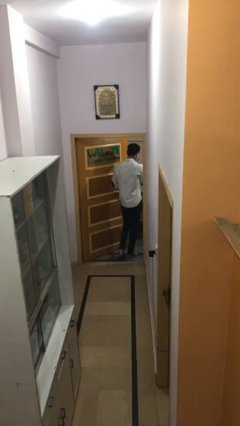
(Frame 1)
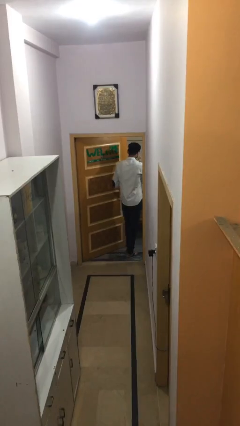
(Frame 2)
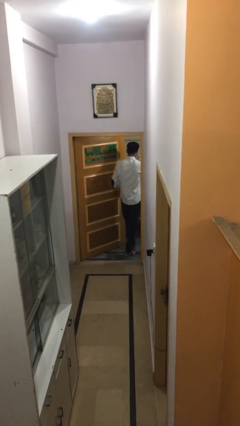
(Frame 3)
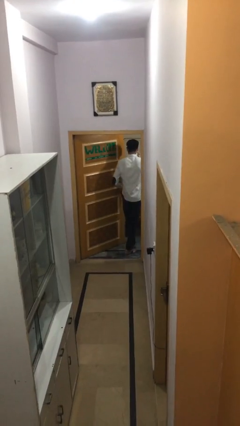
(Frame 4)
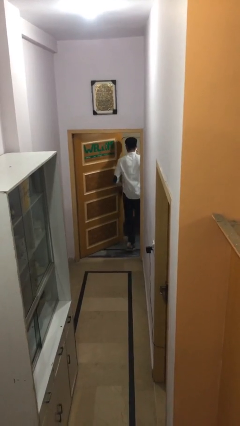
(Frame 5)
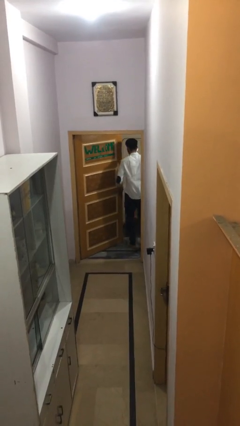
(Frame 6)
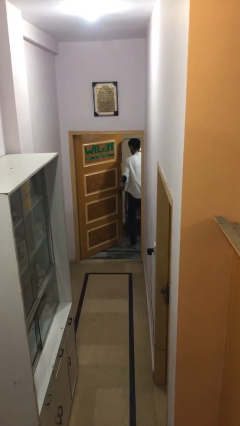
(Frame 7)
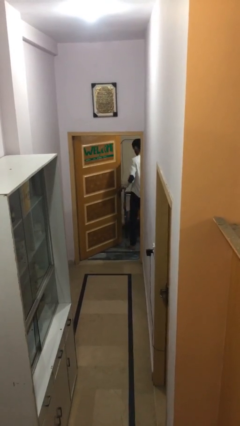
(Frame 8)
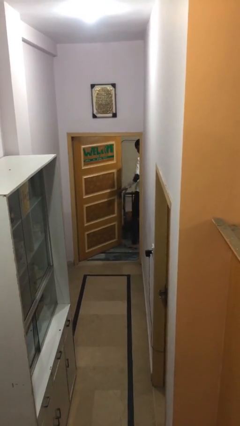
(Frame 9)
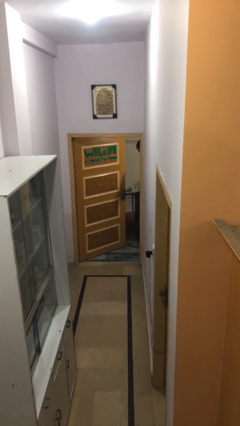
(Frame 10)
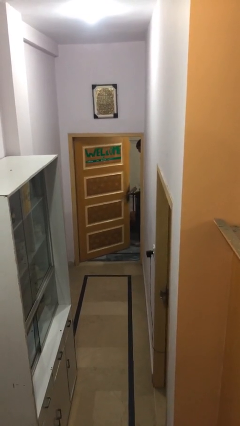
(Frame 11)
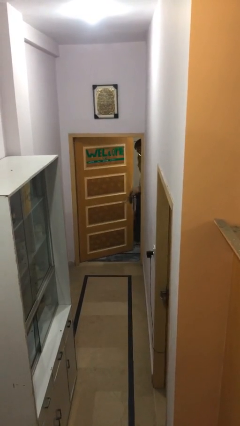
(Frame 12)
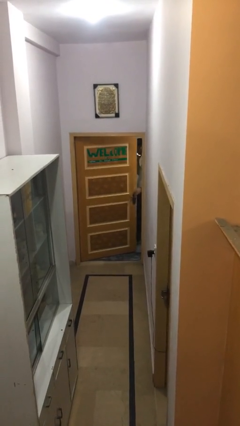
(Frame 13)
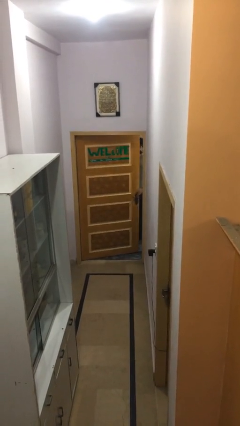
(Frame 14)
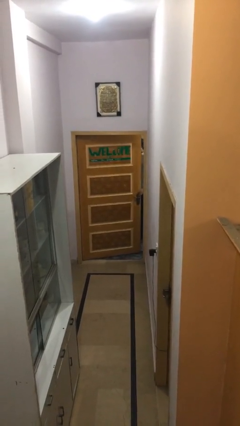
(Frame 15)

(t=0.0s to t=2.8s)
person closes facility door

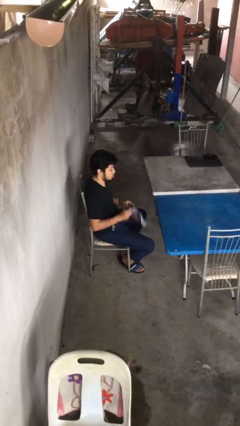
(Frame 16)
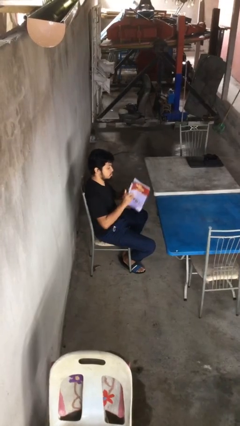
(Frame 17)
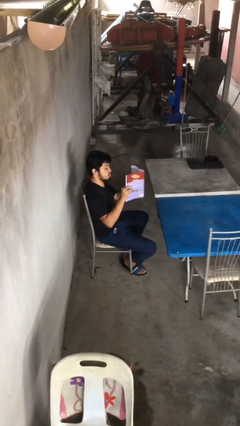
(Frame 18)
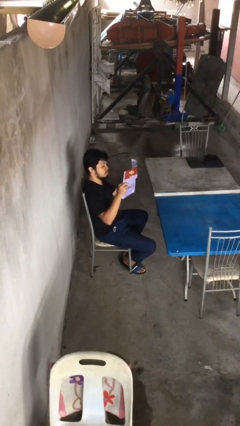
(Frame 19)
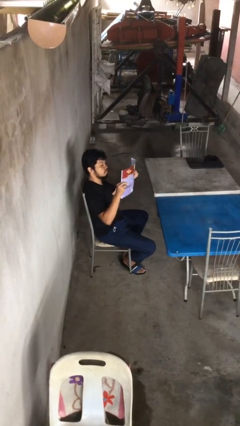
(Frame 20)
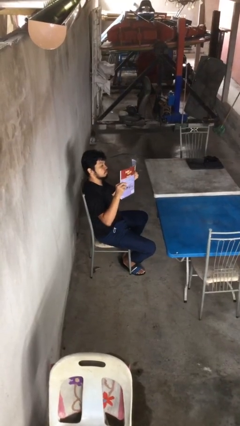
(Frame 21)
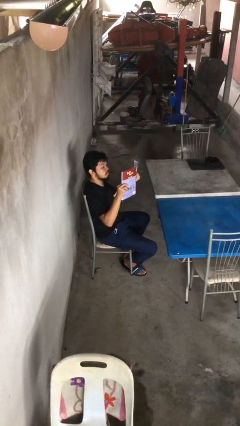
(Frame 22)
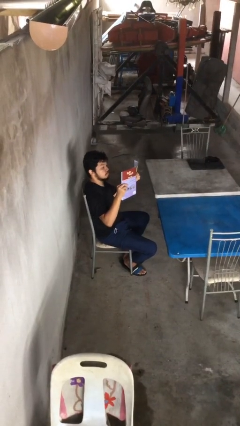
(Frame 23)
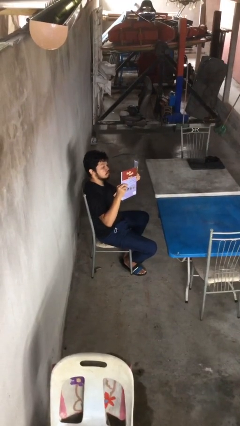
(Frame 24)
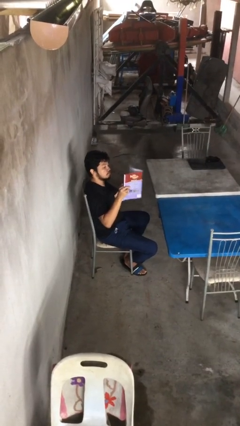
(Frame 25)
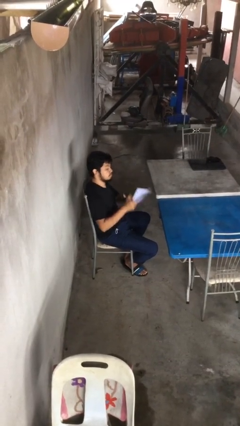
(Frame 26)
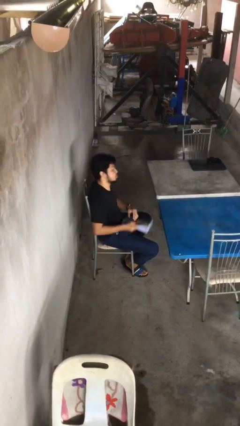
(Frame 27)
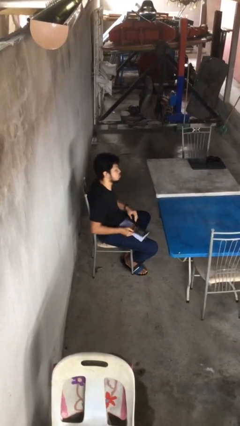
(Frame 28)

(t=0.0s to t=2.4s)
person reads magazine

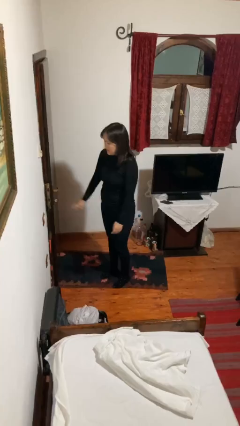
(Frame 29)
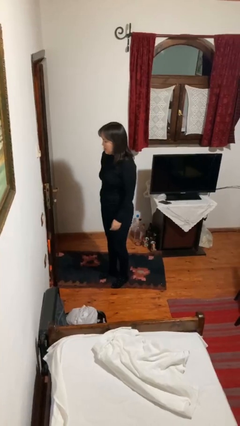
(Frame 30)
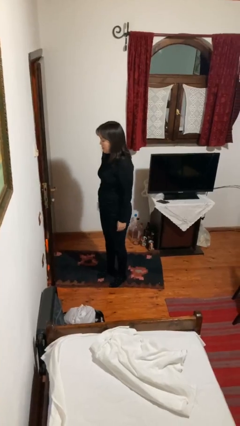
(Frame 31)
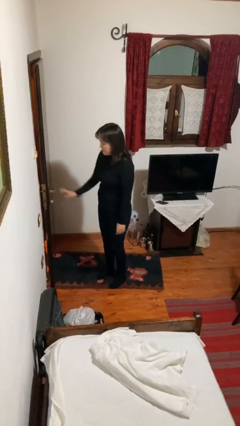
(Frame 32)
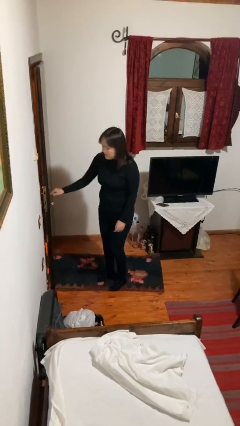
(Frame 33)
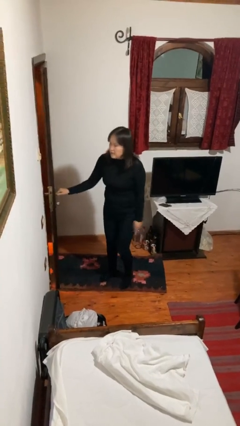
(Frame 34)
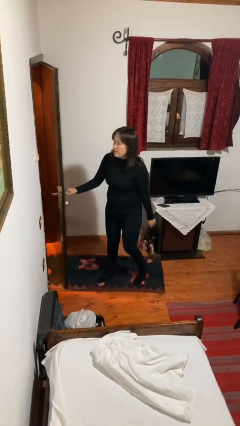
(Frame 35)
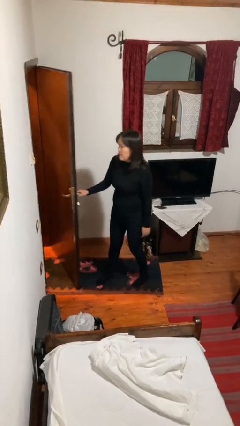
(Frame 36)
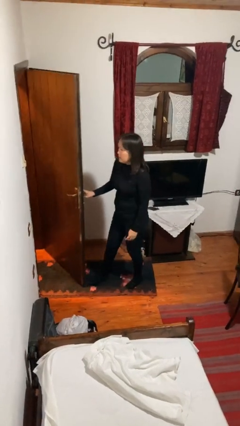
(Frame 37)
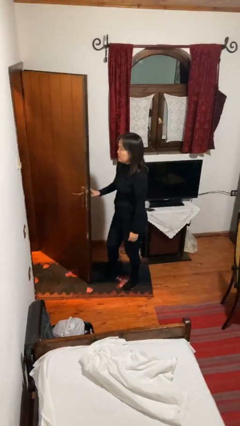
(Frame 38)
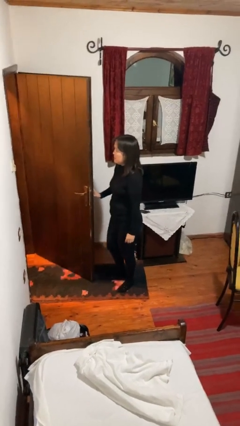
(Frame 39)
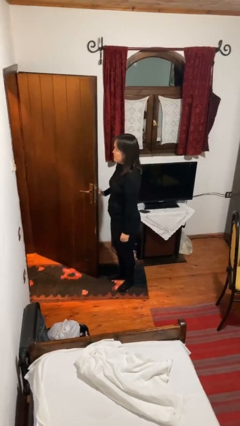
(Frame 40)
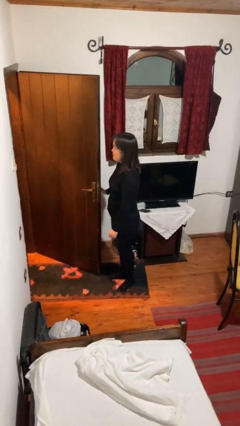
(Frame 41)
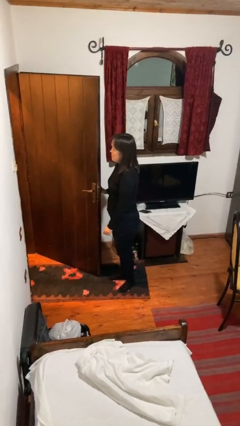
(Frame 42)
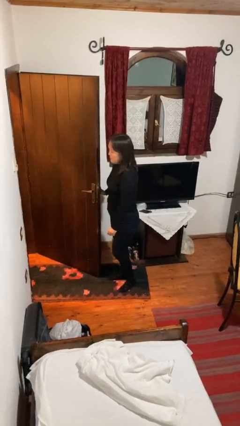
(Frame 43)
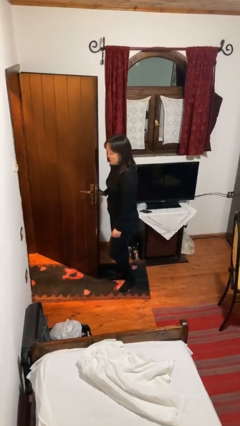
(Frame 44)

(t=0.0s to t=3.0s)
person opens facility door

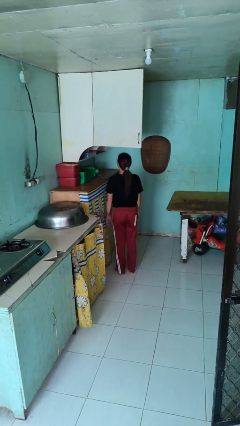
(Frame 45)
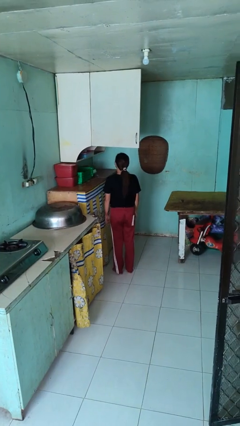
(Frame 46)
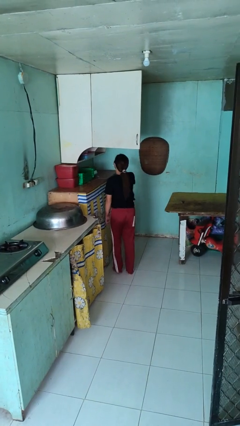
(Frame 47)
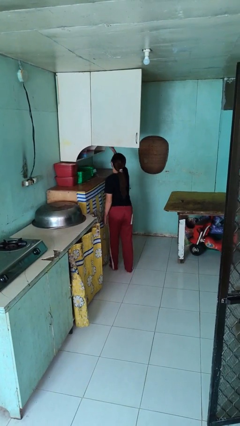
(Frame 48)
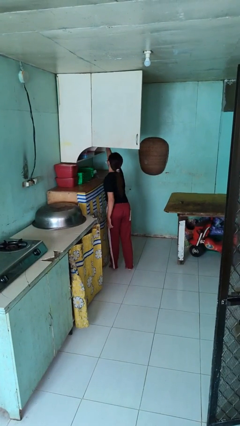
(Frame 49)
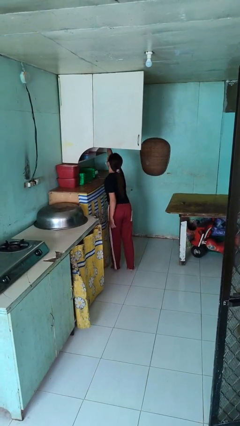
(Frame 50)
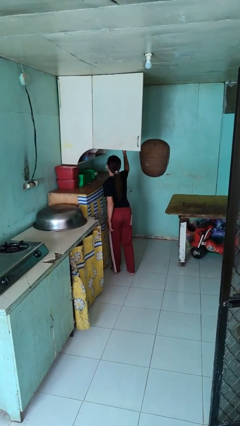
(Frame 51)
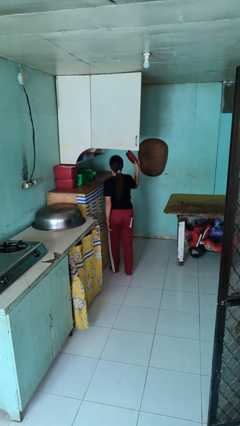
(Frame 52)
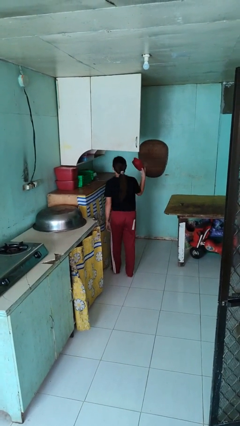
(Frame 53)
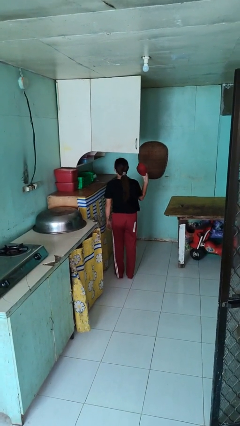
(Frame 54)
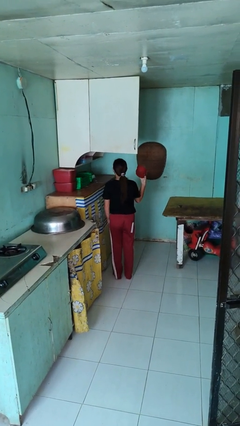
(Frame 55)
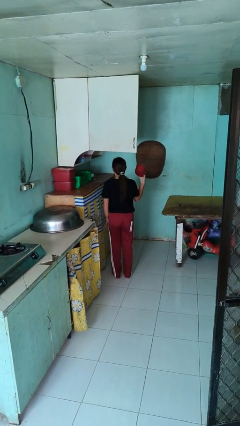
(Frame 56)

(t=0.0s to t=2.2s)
person takes object from cabinet

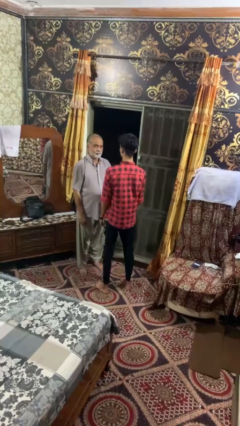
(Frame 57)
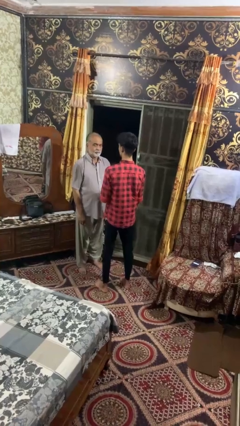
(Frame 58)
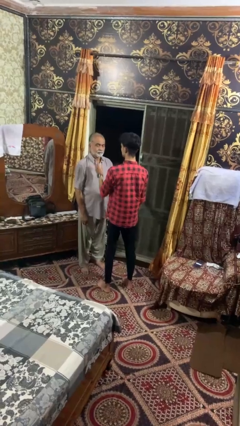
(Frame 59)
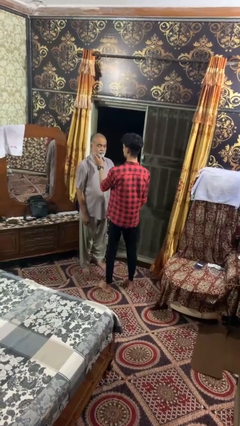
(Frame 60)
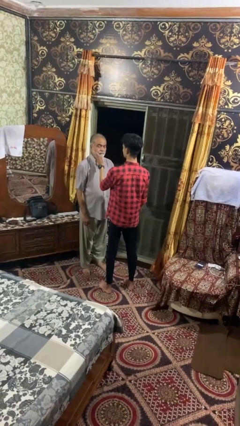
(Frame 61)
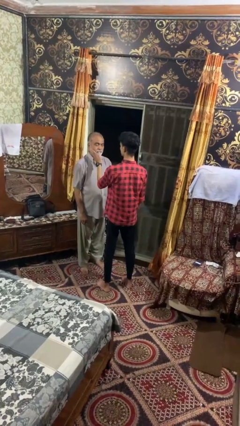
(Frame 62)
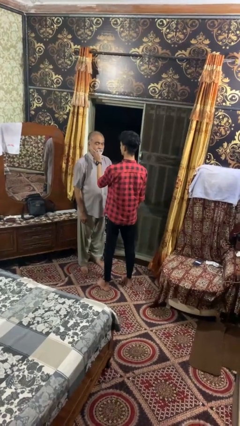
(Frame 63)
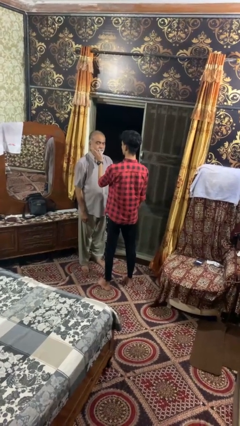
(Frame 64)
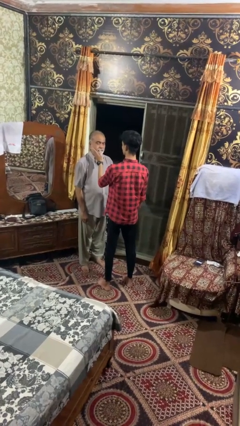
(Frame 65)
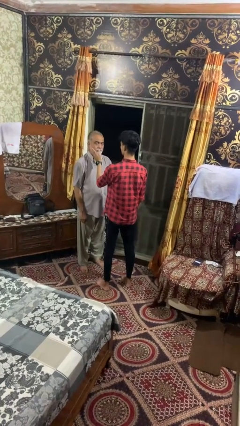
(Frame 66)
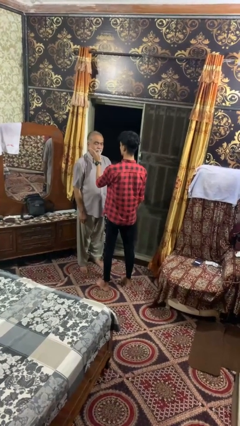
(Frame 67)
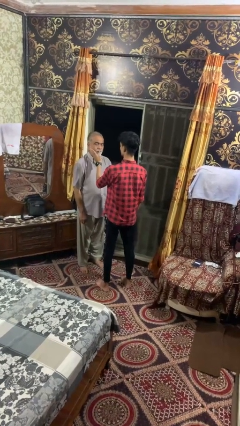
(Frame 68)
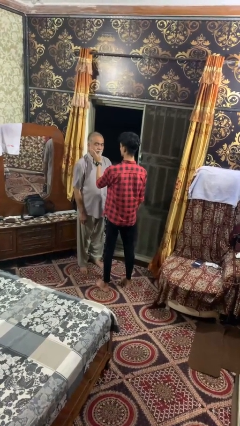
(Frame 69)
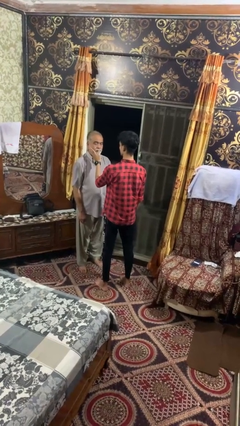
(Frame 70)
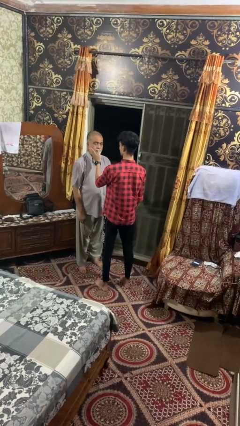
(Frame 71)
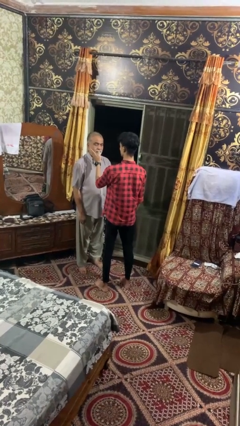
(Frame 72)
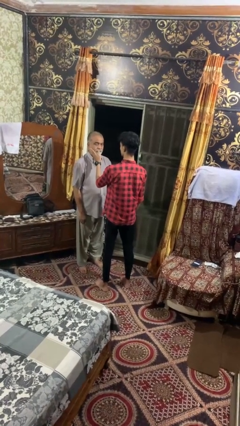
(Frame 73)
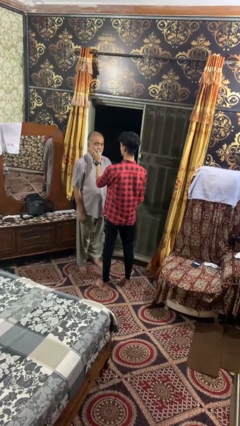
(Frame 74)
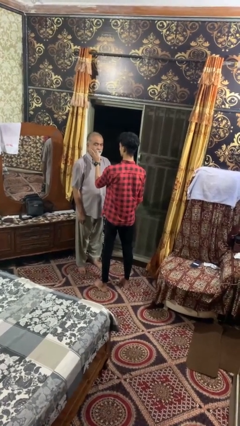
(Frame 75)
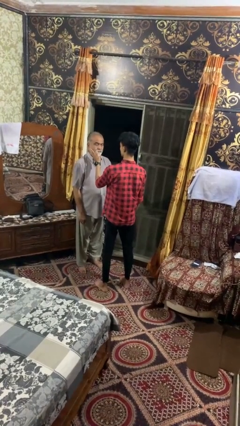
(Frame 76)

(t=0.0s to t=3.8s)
person touches face of person

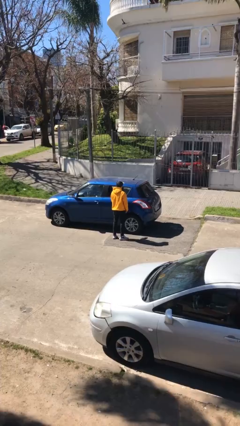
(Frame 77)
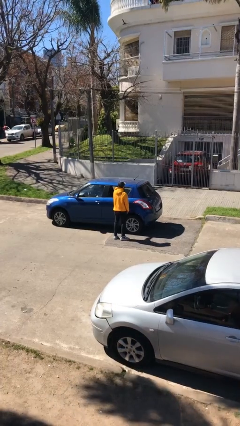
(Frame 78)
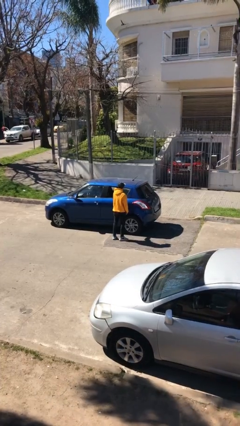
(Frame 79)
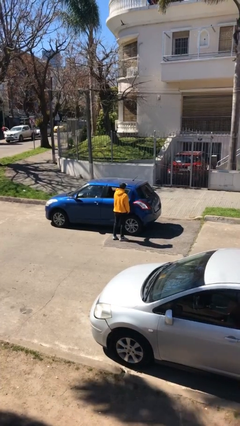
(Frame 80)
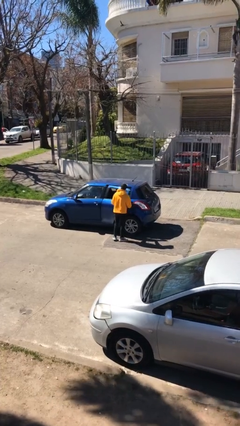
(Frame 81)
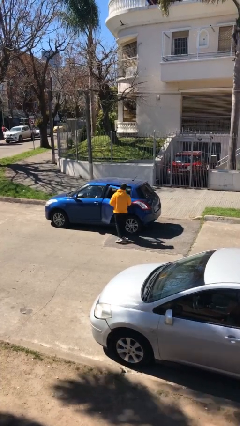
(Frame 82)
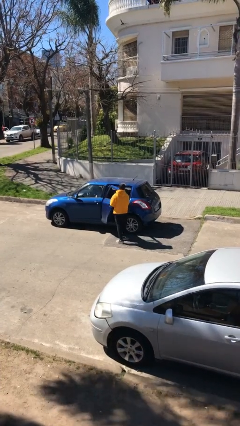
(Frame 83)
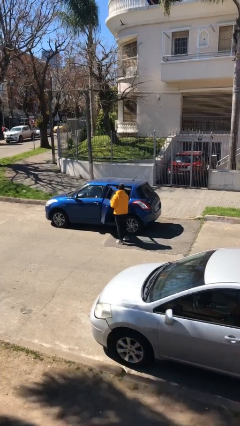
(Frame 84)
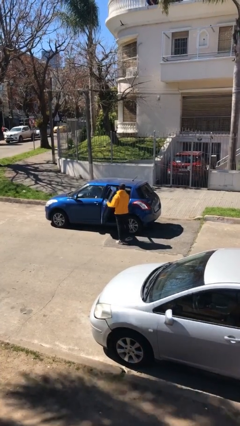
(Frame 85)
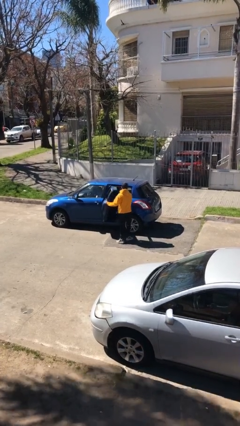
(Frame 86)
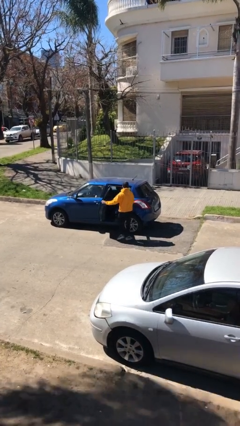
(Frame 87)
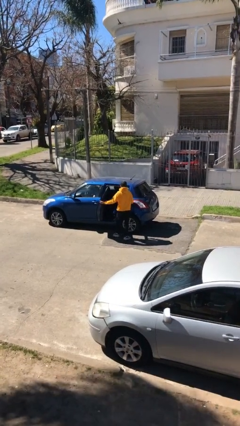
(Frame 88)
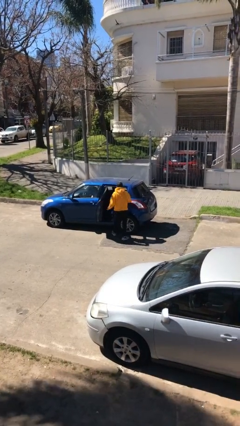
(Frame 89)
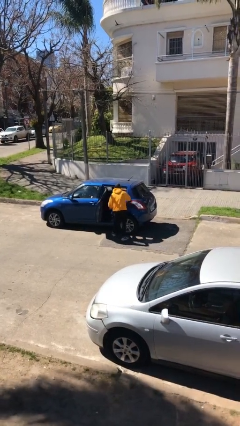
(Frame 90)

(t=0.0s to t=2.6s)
person opens car door

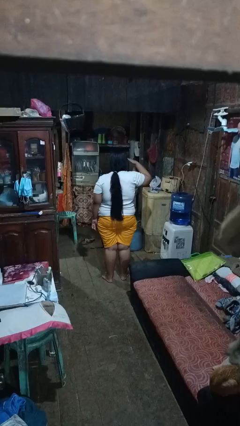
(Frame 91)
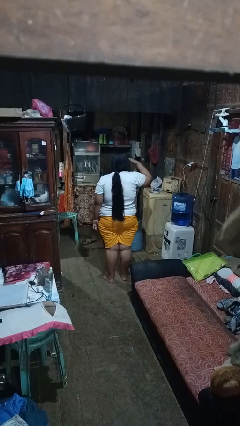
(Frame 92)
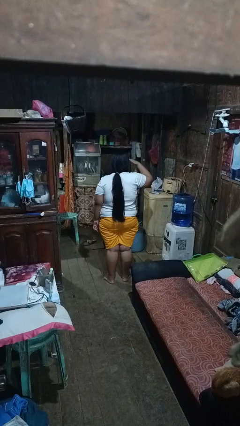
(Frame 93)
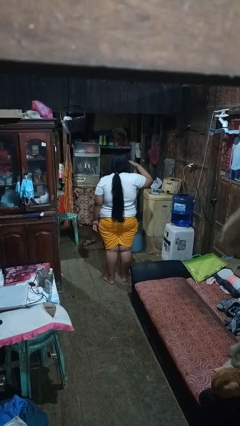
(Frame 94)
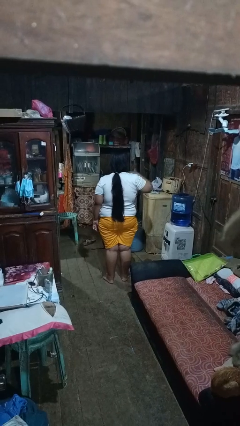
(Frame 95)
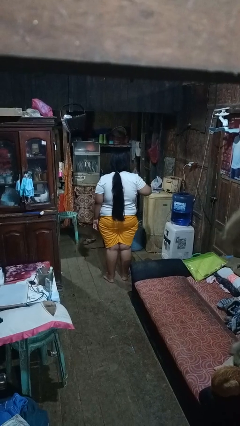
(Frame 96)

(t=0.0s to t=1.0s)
person salutes
